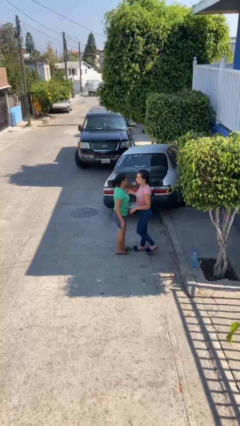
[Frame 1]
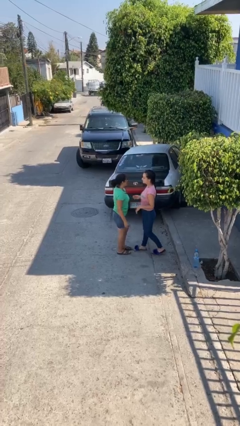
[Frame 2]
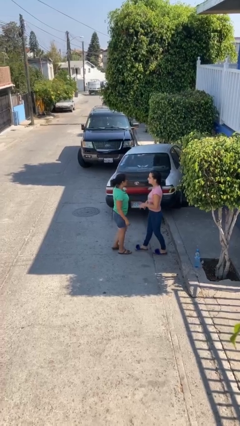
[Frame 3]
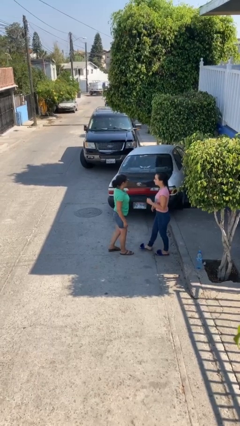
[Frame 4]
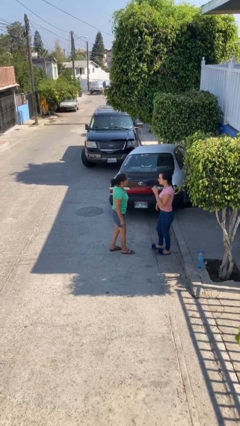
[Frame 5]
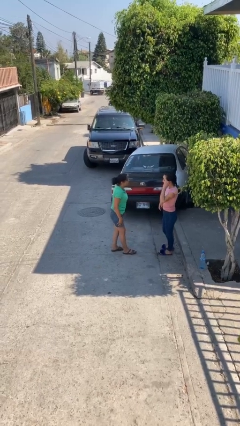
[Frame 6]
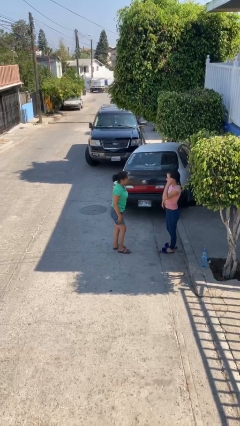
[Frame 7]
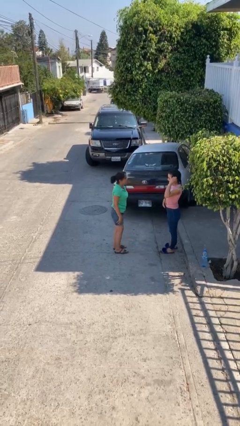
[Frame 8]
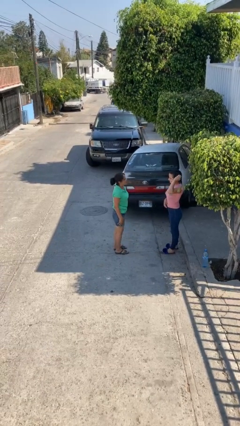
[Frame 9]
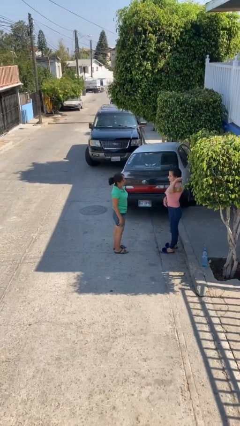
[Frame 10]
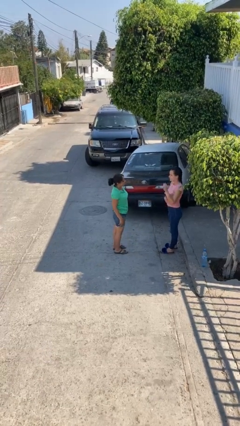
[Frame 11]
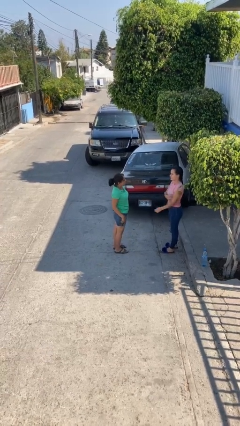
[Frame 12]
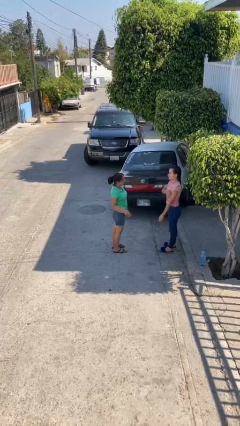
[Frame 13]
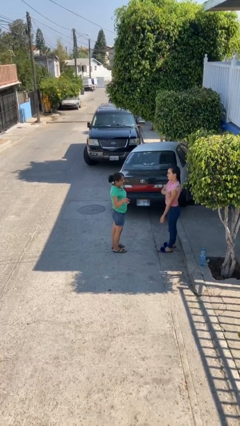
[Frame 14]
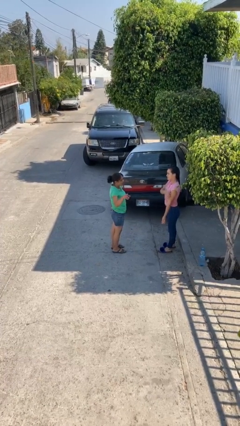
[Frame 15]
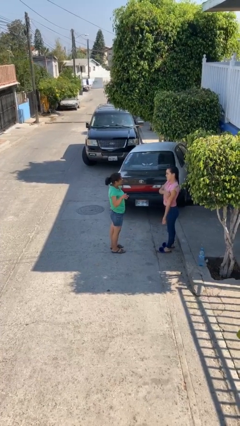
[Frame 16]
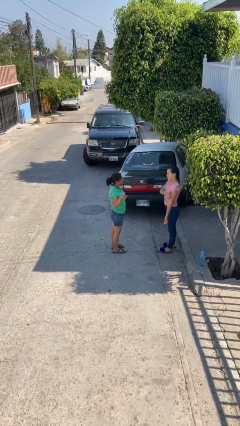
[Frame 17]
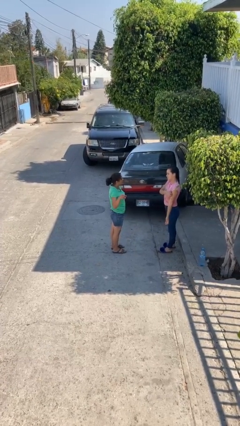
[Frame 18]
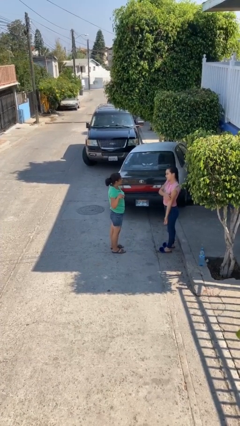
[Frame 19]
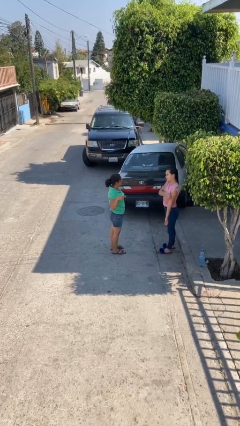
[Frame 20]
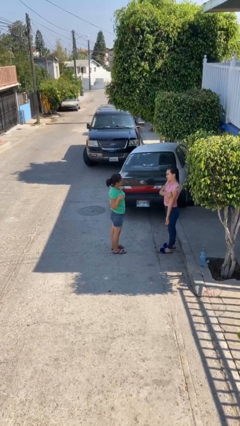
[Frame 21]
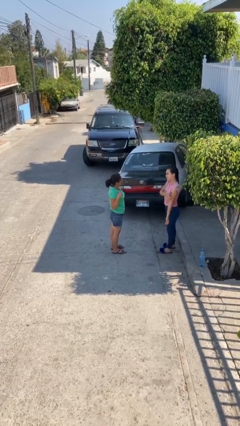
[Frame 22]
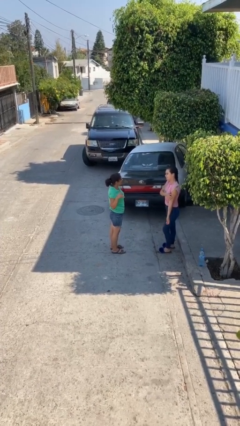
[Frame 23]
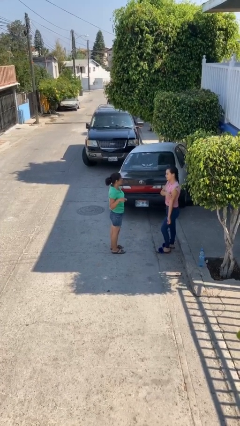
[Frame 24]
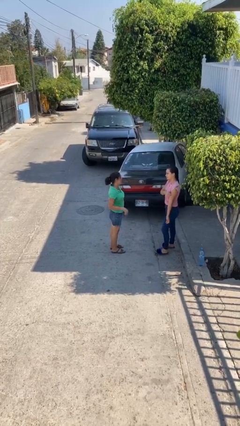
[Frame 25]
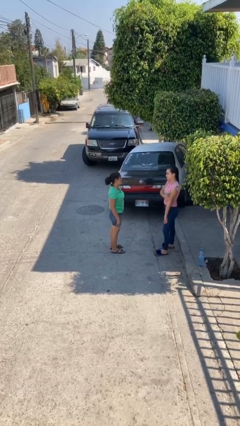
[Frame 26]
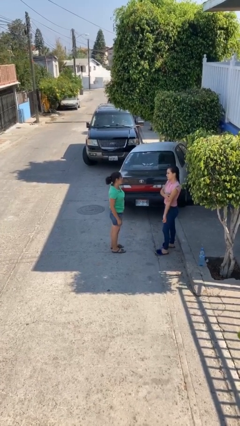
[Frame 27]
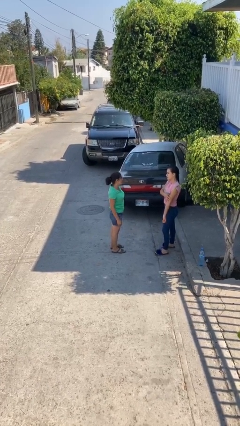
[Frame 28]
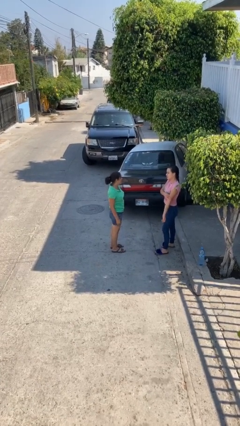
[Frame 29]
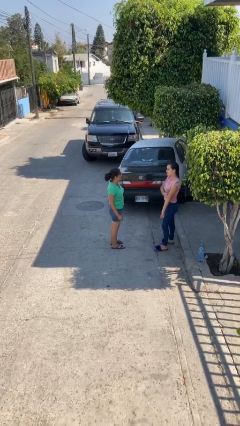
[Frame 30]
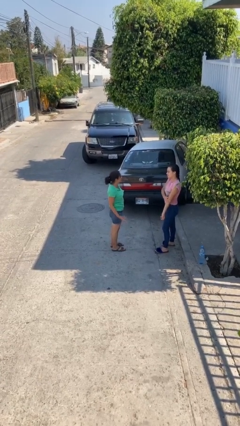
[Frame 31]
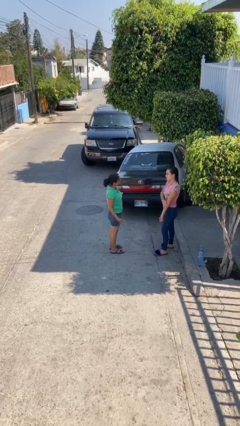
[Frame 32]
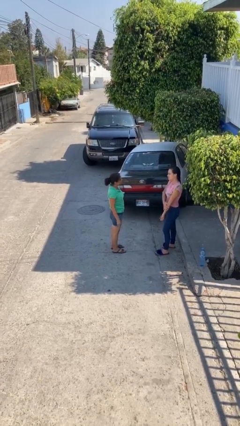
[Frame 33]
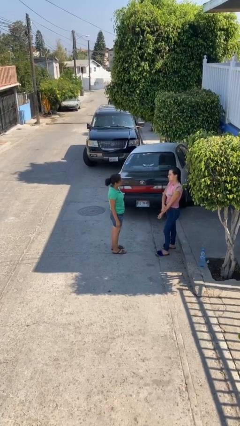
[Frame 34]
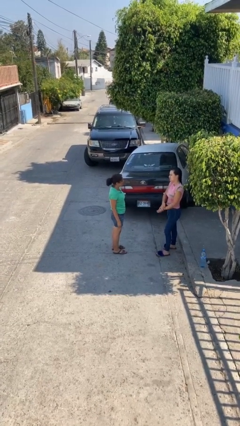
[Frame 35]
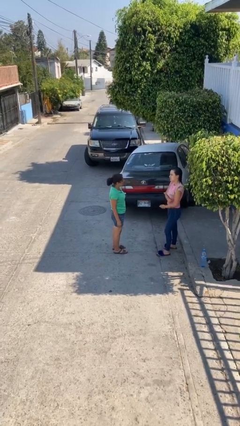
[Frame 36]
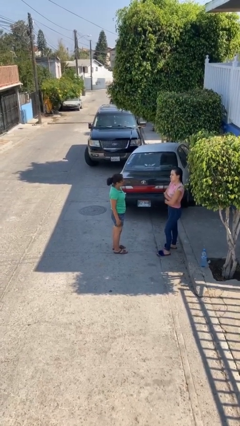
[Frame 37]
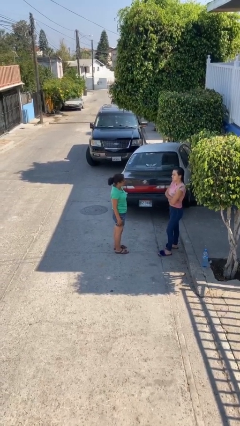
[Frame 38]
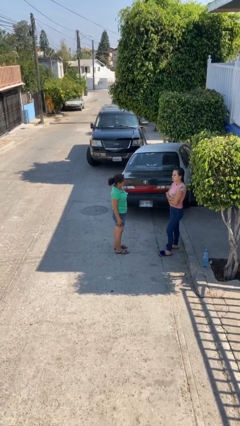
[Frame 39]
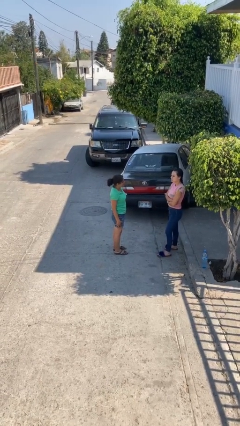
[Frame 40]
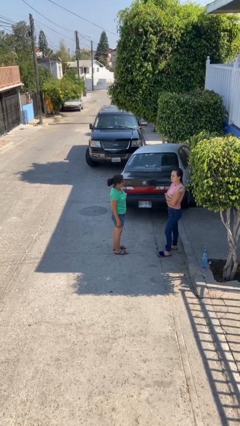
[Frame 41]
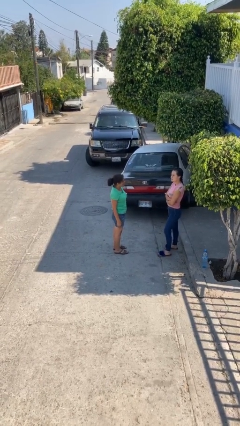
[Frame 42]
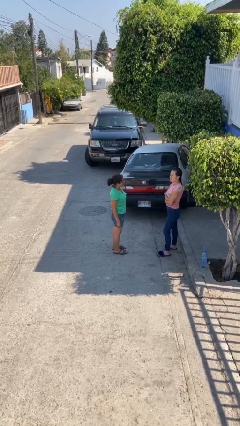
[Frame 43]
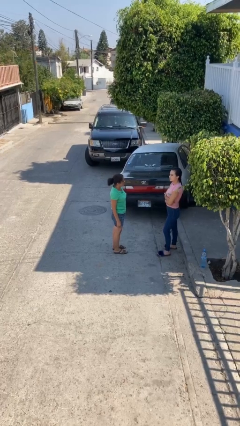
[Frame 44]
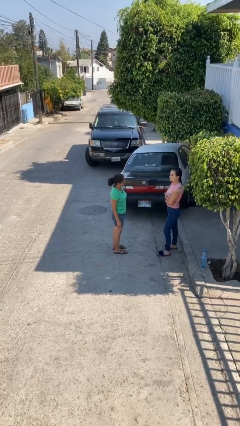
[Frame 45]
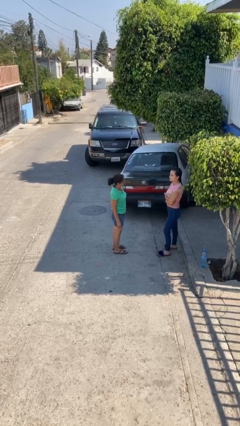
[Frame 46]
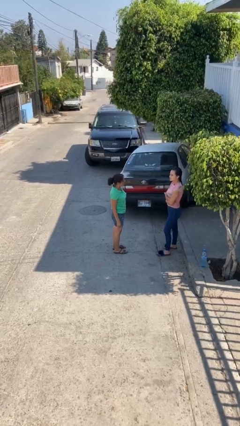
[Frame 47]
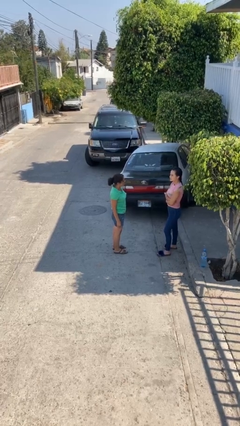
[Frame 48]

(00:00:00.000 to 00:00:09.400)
person talks to person

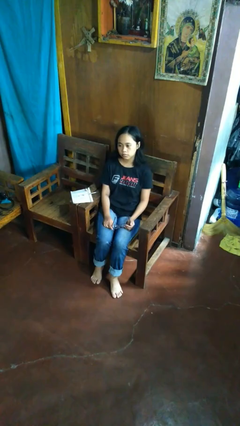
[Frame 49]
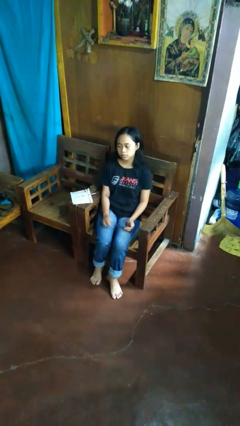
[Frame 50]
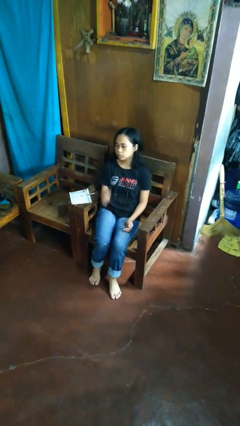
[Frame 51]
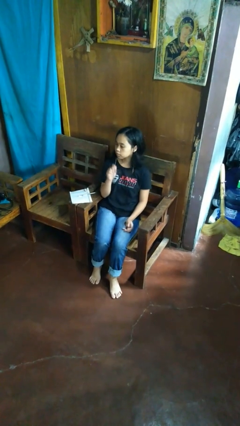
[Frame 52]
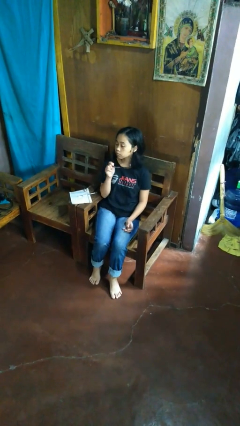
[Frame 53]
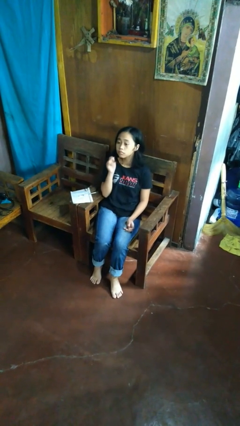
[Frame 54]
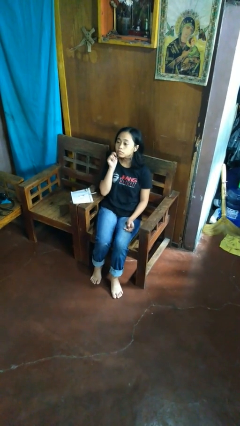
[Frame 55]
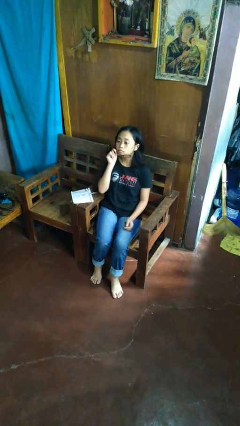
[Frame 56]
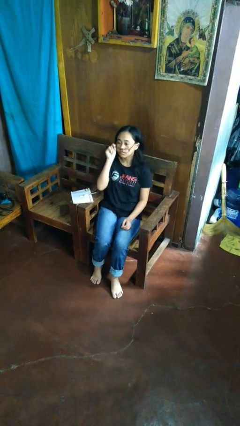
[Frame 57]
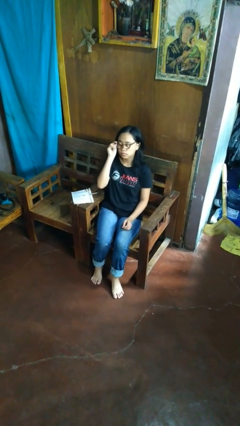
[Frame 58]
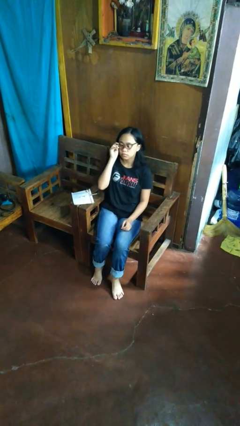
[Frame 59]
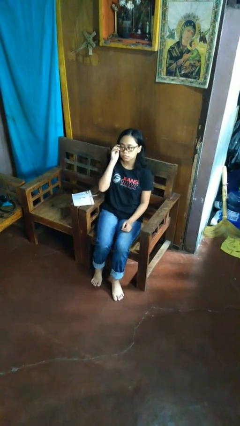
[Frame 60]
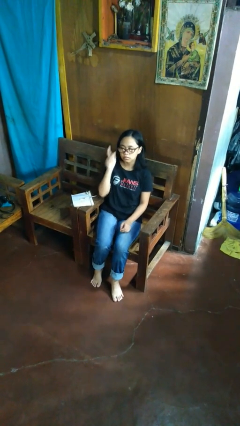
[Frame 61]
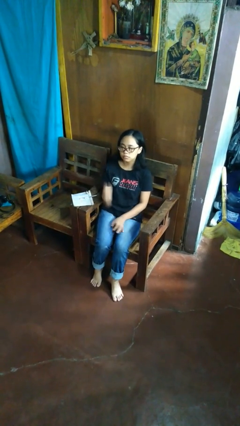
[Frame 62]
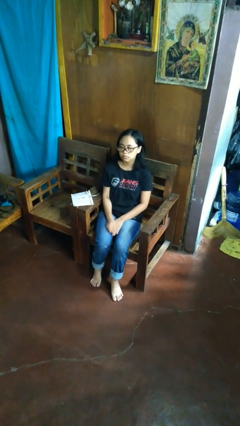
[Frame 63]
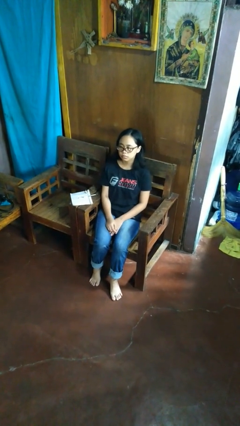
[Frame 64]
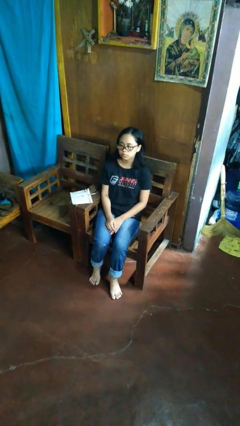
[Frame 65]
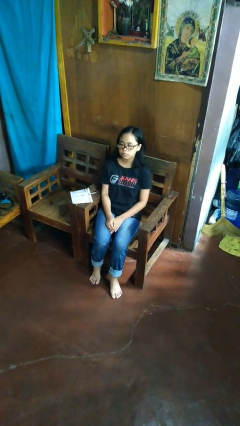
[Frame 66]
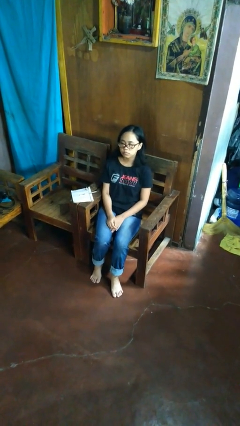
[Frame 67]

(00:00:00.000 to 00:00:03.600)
person puts on glasses

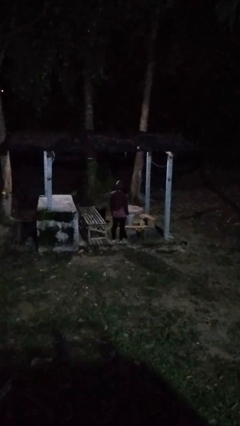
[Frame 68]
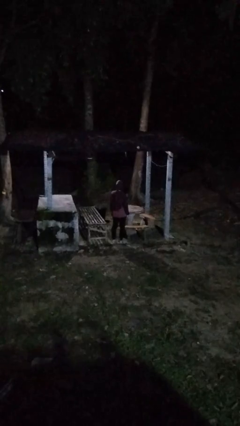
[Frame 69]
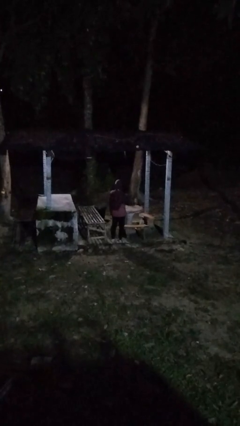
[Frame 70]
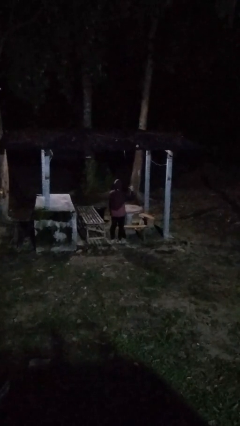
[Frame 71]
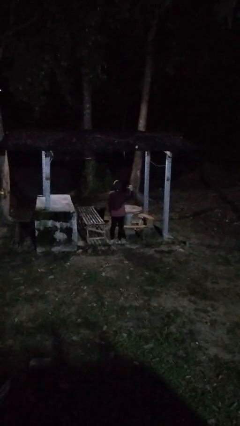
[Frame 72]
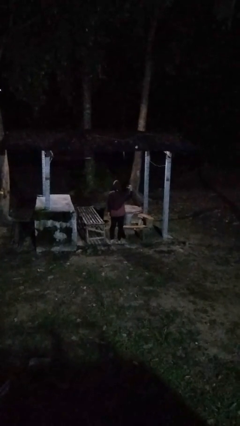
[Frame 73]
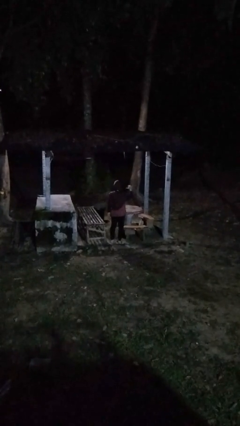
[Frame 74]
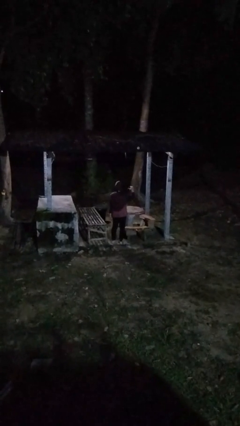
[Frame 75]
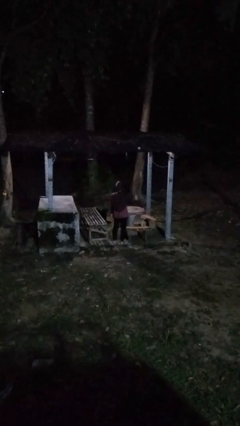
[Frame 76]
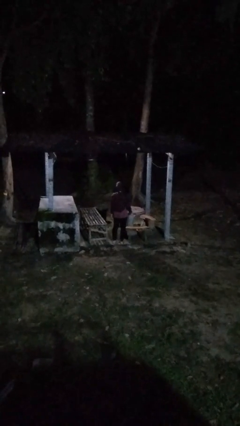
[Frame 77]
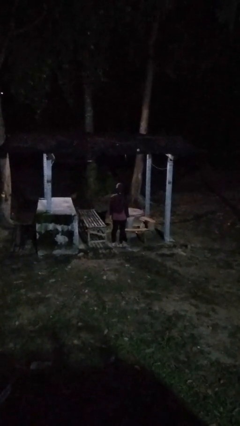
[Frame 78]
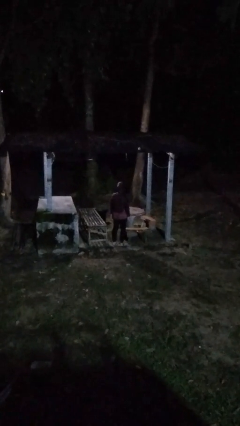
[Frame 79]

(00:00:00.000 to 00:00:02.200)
person gestures behind me

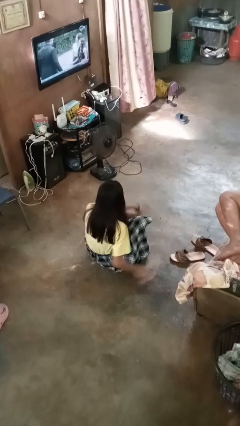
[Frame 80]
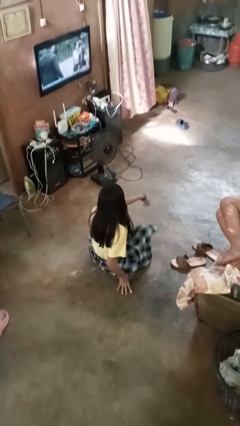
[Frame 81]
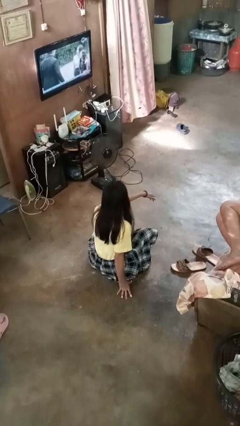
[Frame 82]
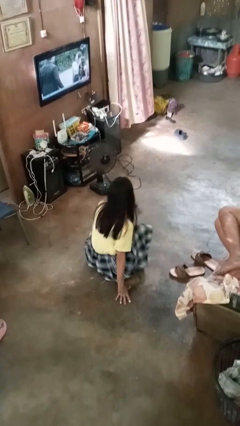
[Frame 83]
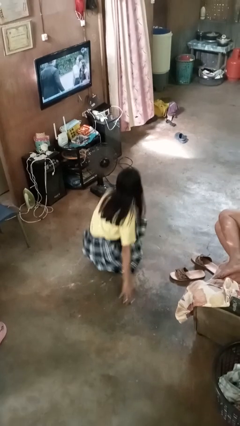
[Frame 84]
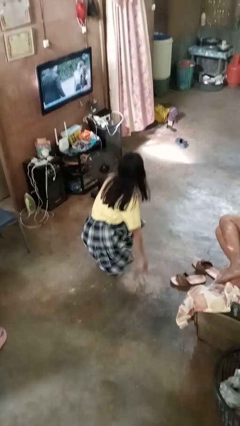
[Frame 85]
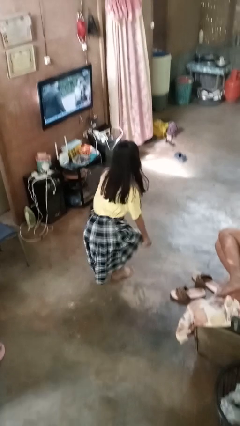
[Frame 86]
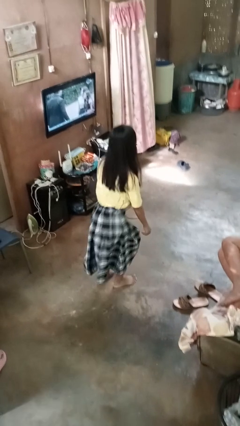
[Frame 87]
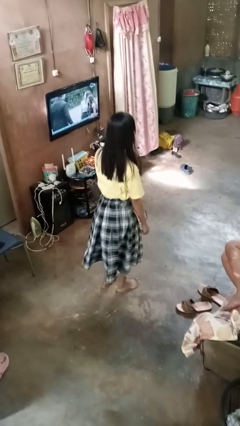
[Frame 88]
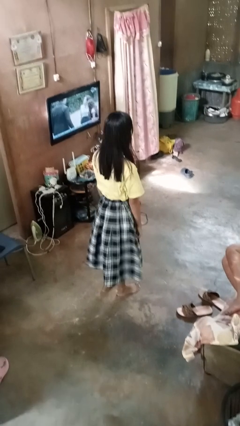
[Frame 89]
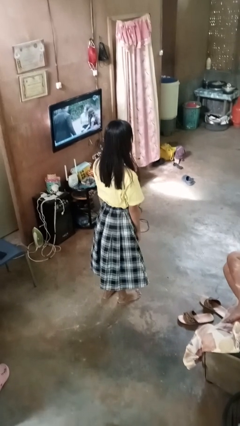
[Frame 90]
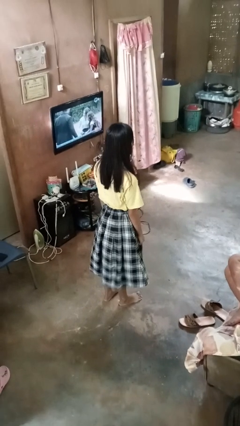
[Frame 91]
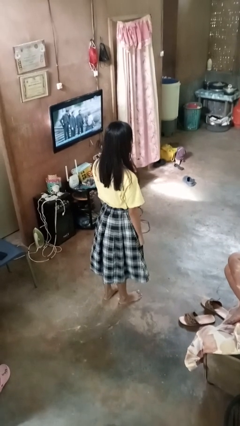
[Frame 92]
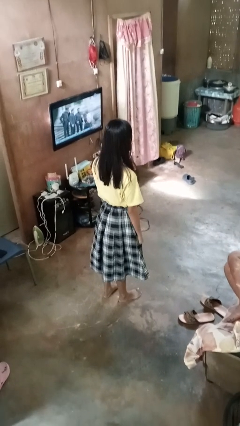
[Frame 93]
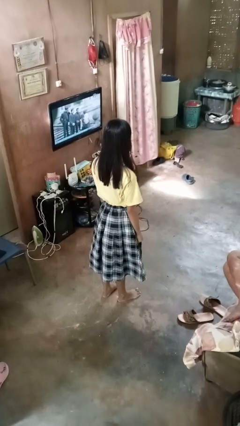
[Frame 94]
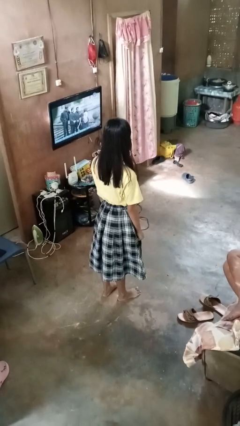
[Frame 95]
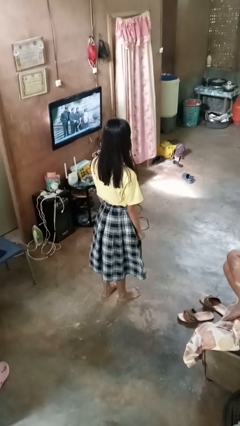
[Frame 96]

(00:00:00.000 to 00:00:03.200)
person stands up from floor
